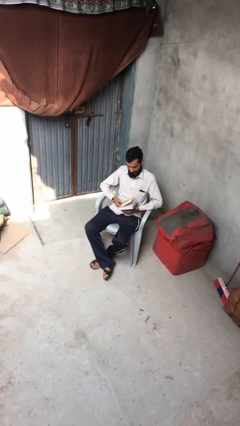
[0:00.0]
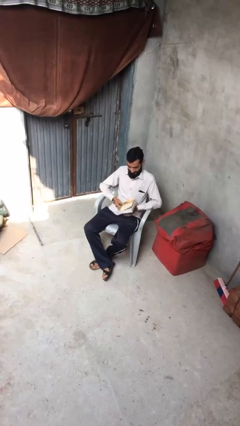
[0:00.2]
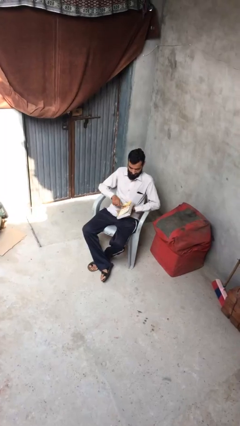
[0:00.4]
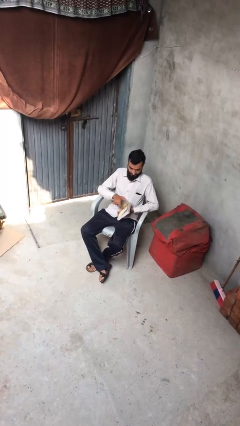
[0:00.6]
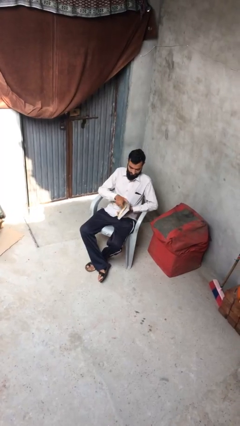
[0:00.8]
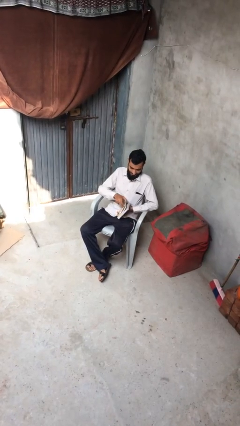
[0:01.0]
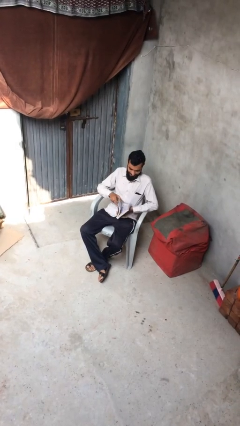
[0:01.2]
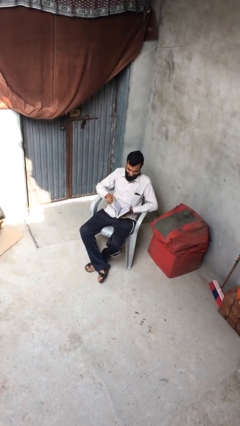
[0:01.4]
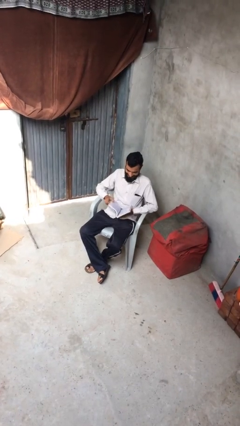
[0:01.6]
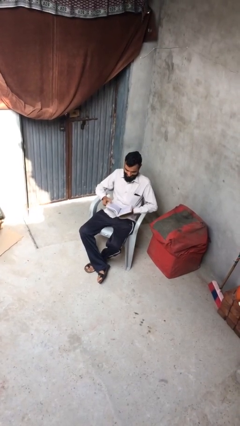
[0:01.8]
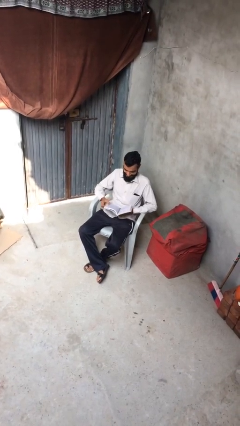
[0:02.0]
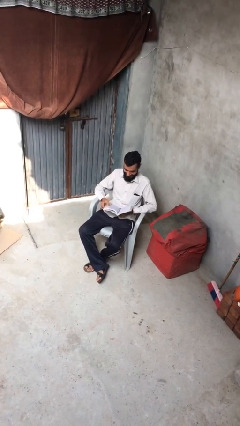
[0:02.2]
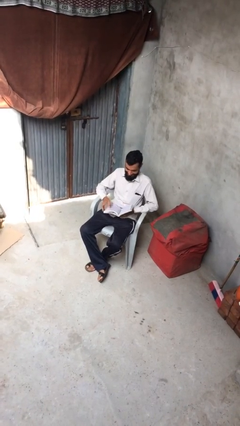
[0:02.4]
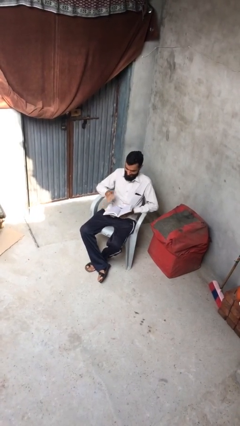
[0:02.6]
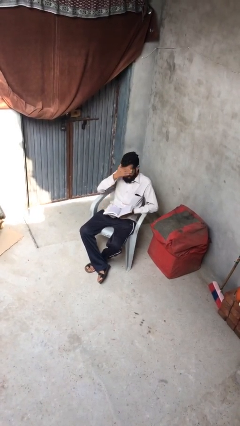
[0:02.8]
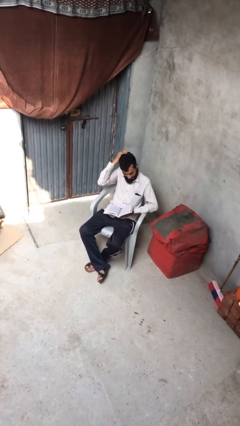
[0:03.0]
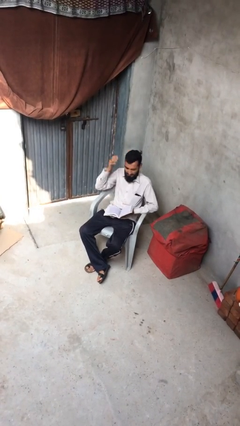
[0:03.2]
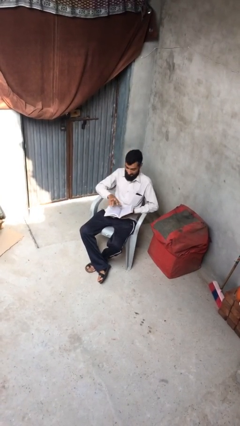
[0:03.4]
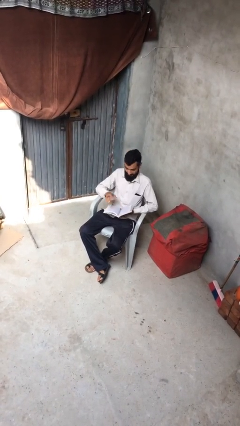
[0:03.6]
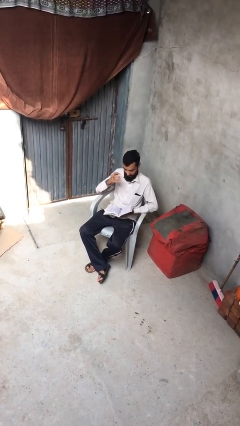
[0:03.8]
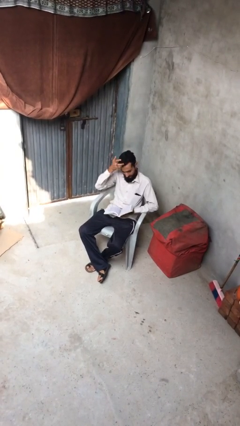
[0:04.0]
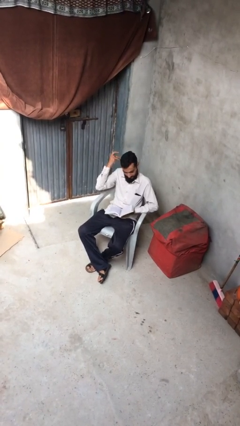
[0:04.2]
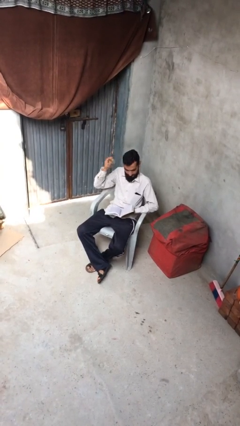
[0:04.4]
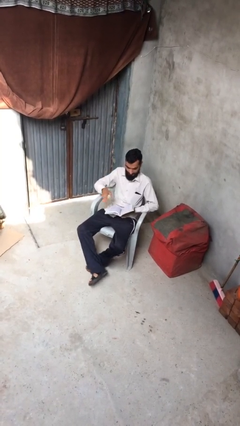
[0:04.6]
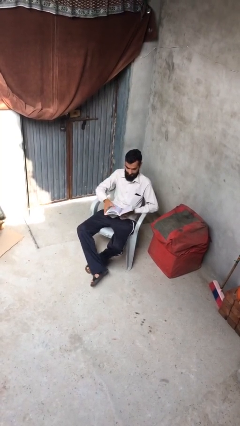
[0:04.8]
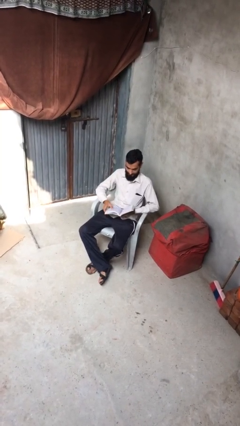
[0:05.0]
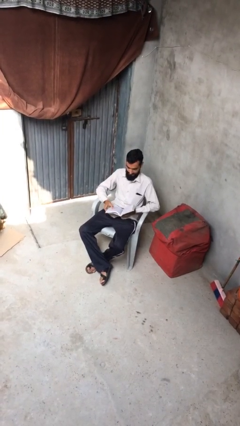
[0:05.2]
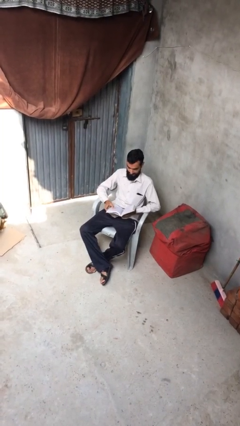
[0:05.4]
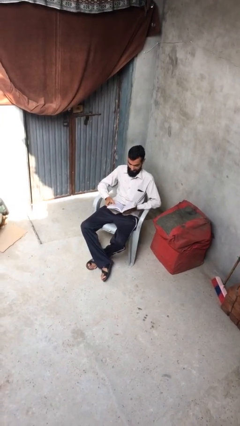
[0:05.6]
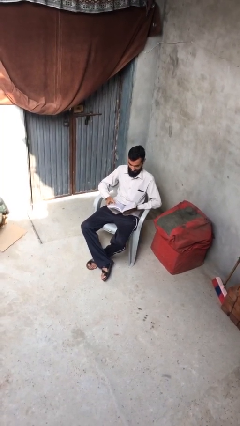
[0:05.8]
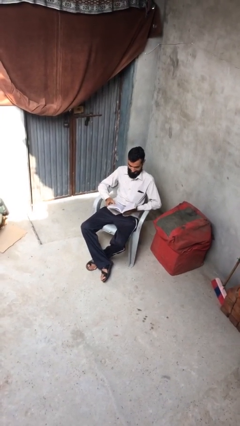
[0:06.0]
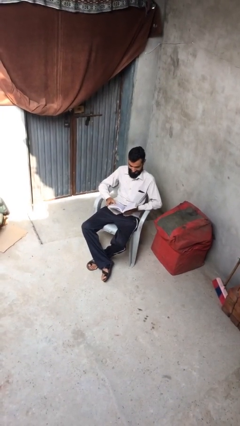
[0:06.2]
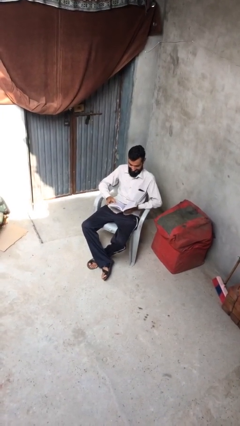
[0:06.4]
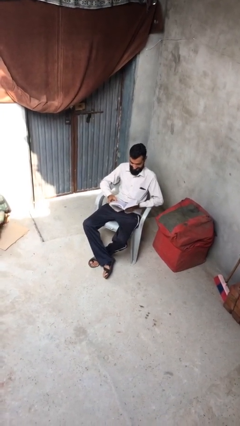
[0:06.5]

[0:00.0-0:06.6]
person reads document

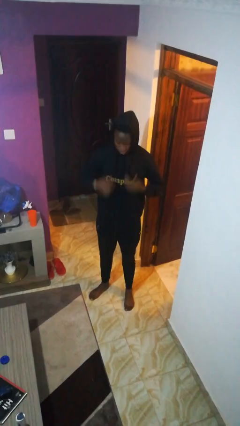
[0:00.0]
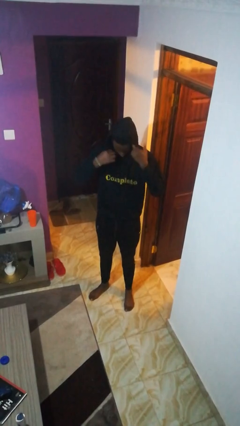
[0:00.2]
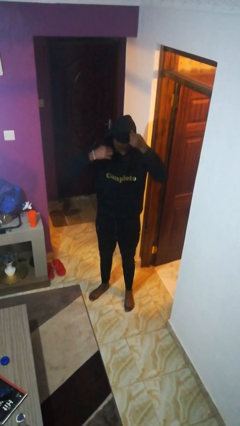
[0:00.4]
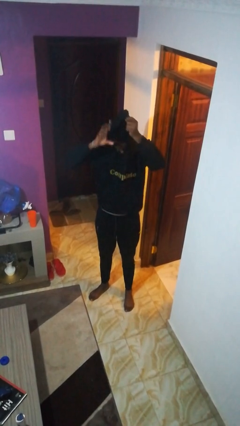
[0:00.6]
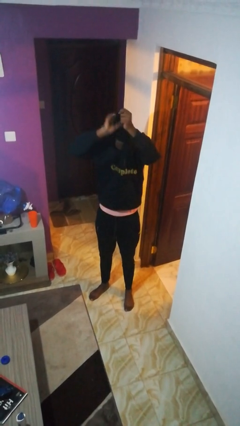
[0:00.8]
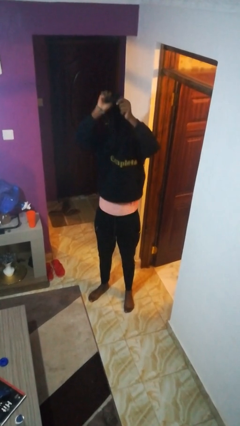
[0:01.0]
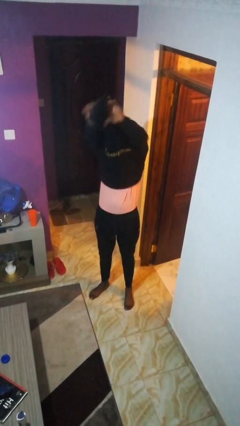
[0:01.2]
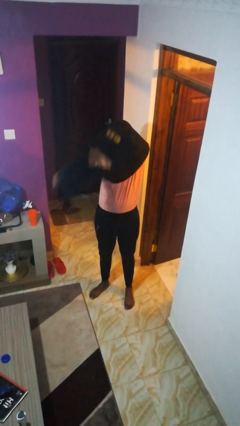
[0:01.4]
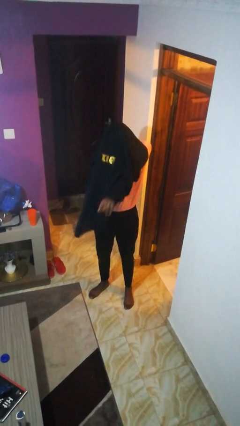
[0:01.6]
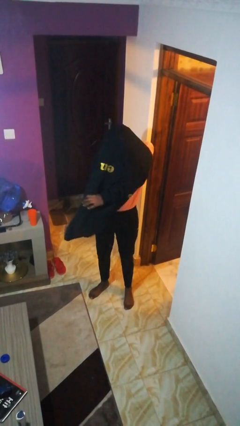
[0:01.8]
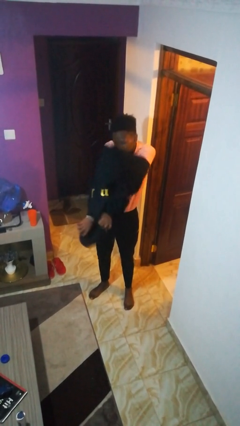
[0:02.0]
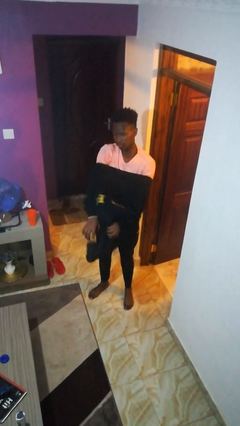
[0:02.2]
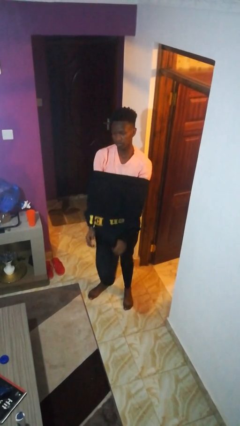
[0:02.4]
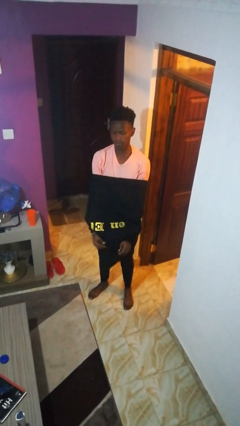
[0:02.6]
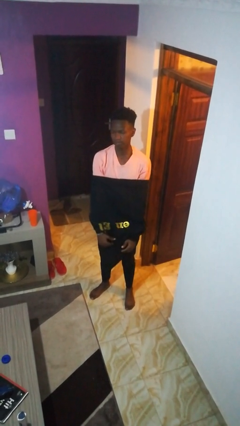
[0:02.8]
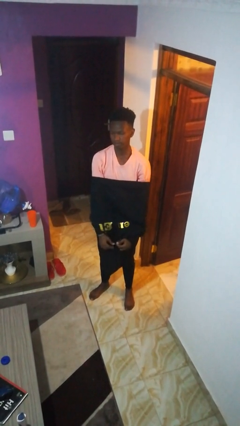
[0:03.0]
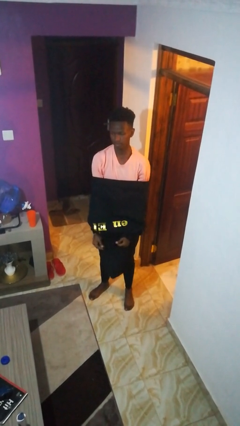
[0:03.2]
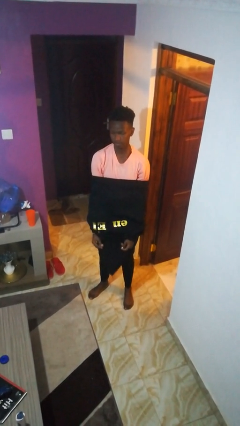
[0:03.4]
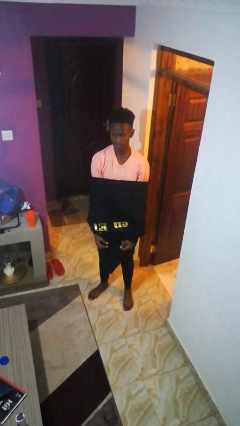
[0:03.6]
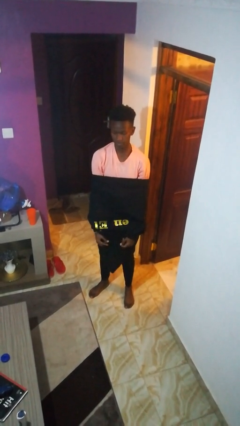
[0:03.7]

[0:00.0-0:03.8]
person takes off hoodie

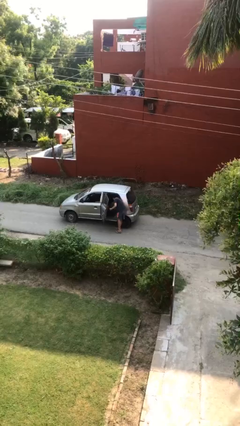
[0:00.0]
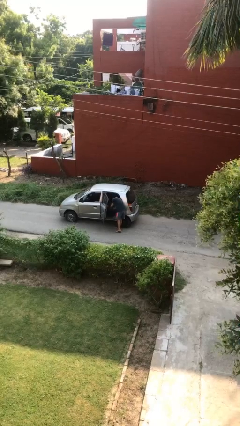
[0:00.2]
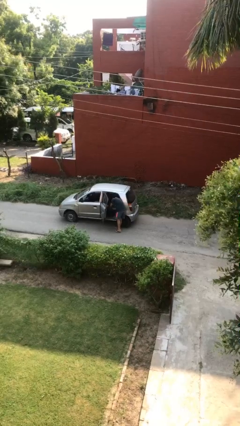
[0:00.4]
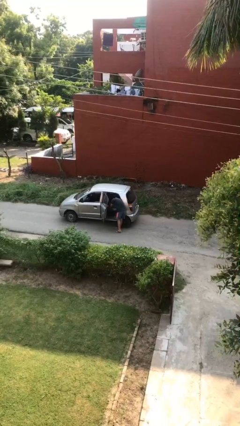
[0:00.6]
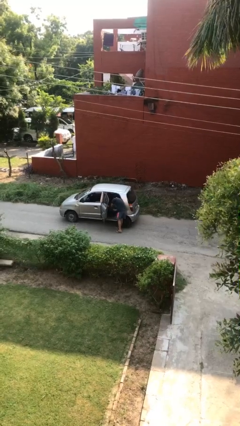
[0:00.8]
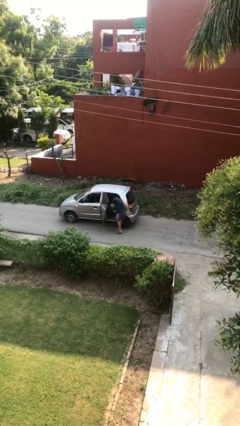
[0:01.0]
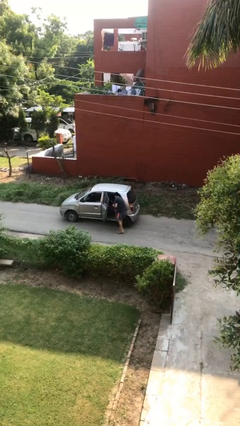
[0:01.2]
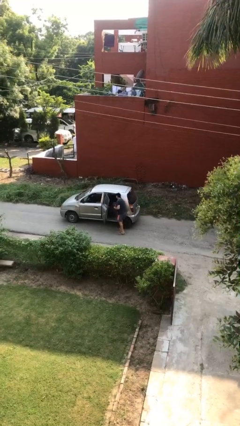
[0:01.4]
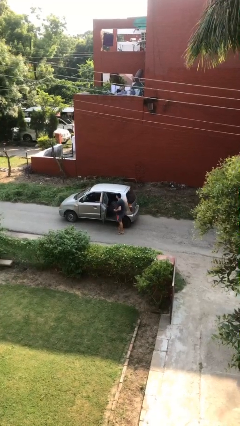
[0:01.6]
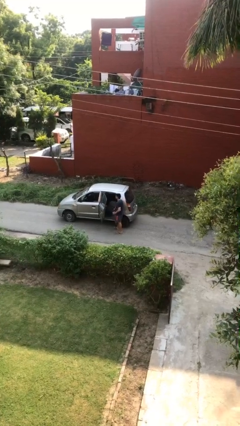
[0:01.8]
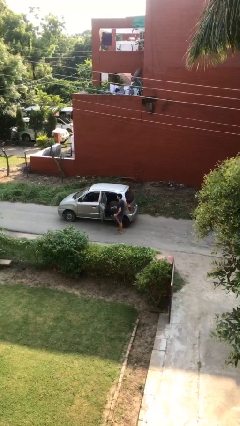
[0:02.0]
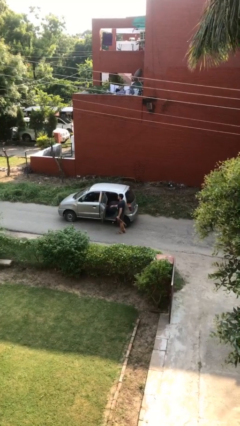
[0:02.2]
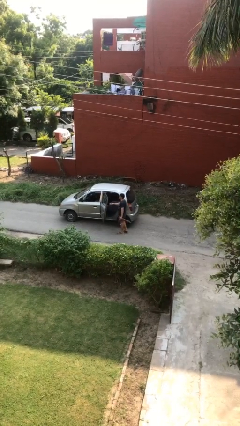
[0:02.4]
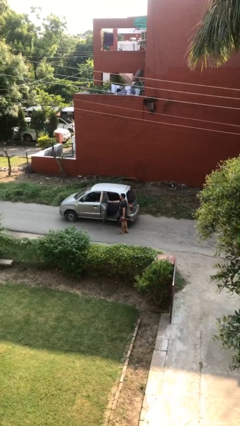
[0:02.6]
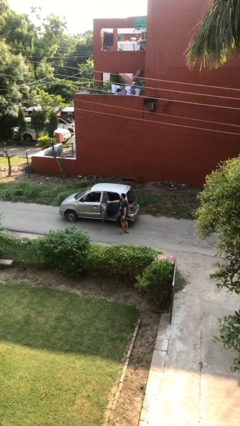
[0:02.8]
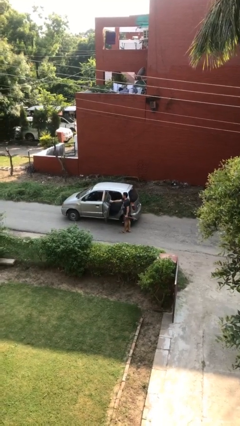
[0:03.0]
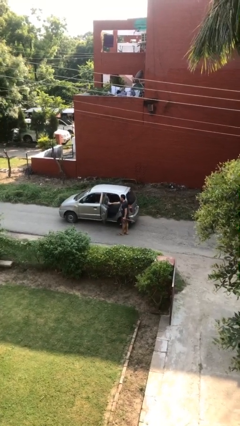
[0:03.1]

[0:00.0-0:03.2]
person unloads car

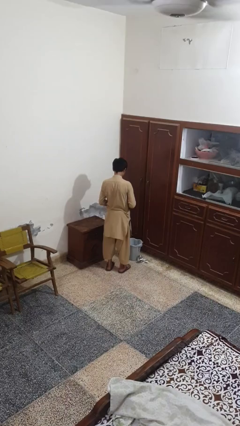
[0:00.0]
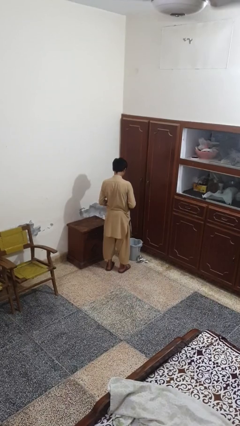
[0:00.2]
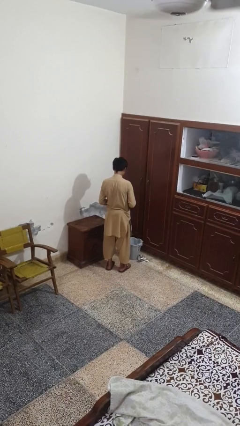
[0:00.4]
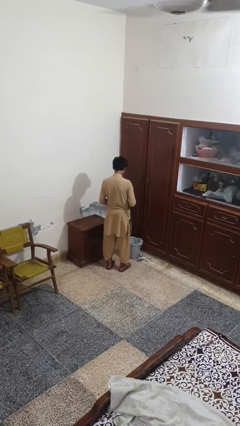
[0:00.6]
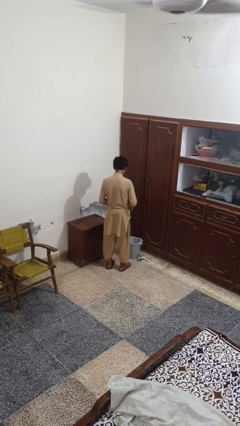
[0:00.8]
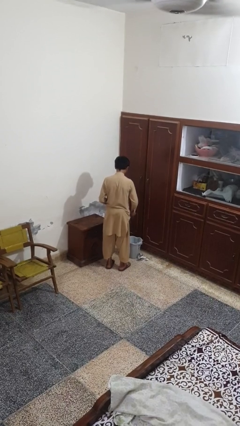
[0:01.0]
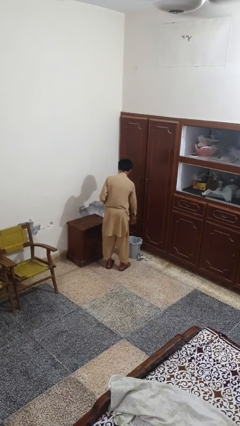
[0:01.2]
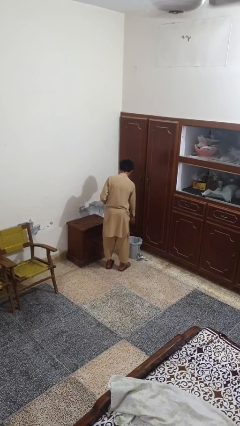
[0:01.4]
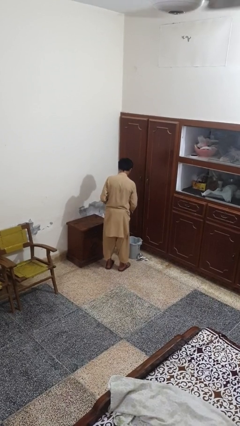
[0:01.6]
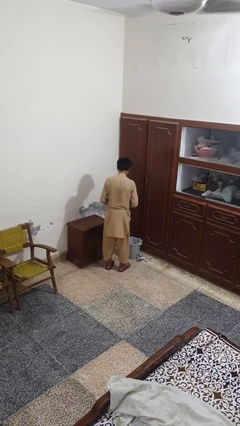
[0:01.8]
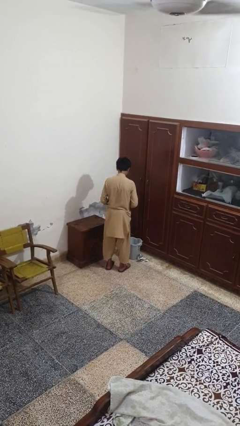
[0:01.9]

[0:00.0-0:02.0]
person discards trash

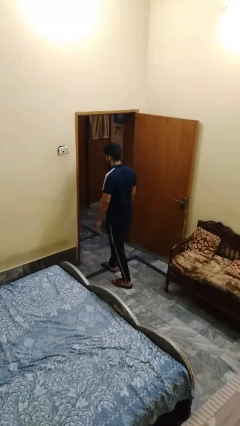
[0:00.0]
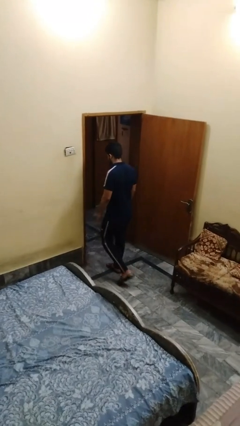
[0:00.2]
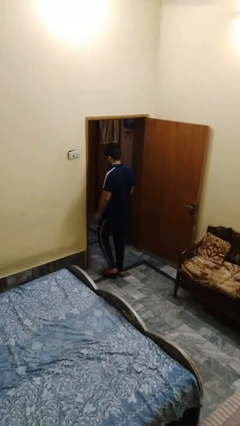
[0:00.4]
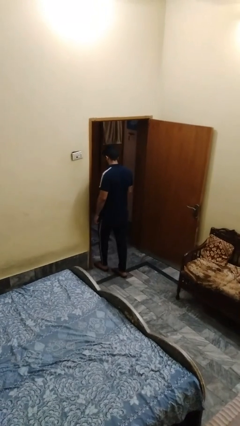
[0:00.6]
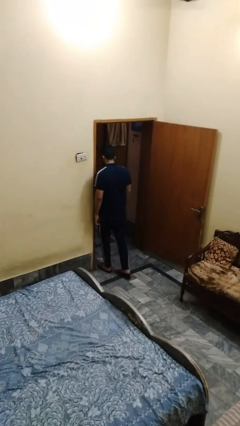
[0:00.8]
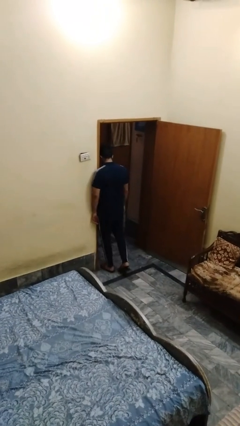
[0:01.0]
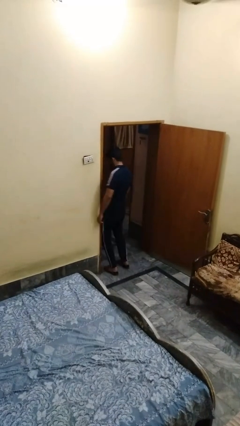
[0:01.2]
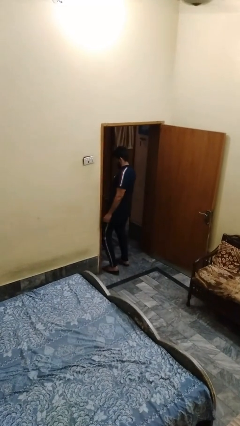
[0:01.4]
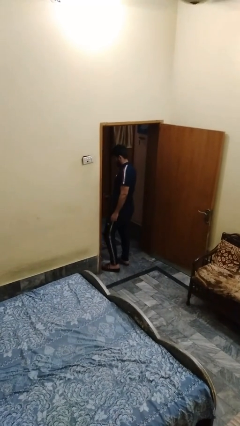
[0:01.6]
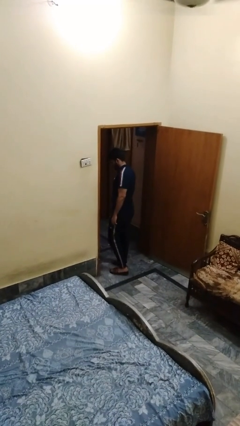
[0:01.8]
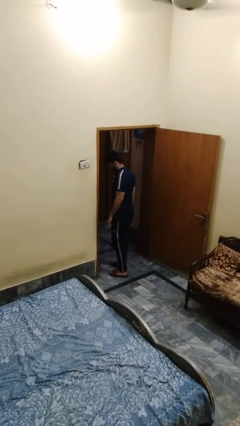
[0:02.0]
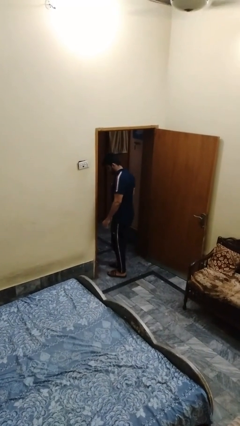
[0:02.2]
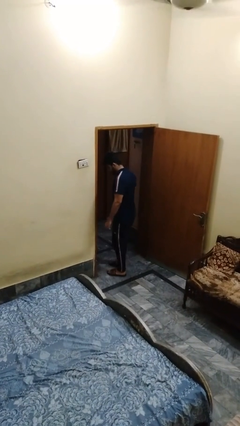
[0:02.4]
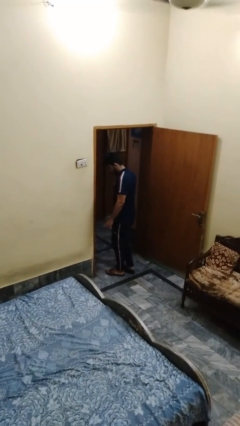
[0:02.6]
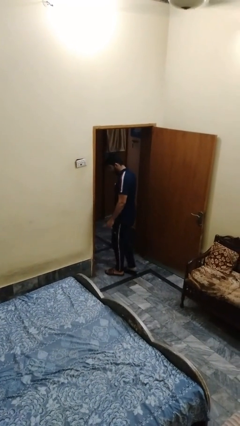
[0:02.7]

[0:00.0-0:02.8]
person bumps into wall
